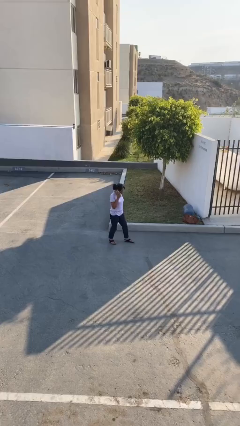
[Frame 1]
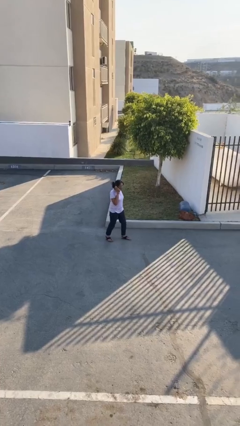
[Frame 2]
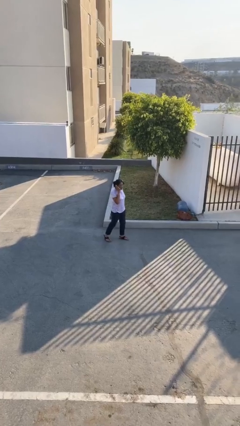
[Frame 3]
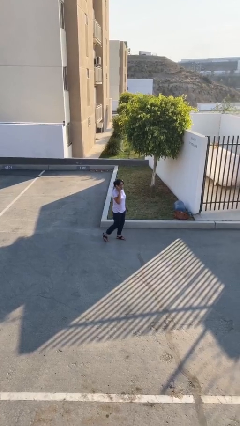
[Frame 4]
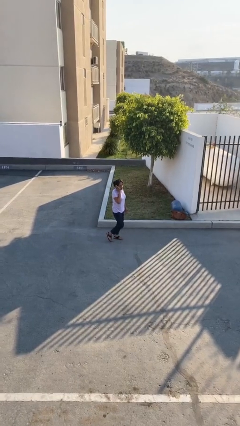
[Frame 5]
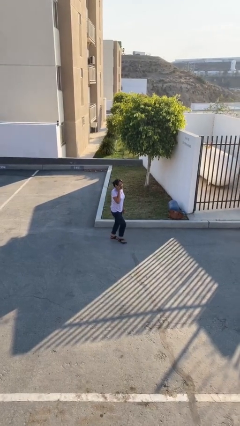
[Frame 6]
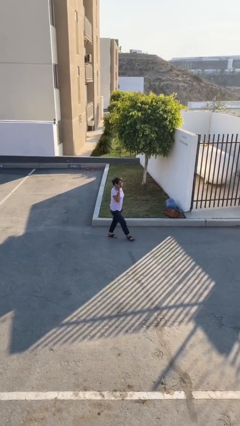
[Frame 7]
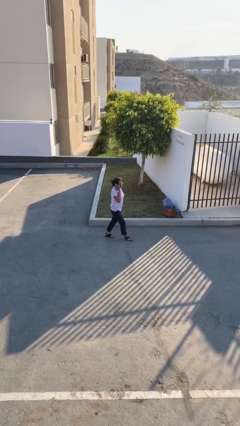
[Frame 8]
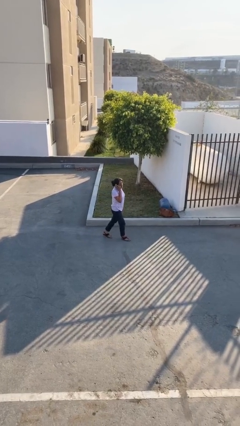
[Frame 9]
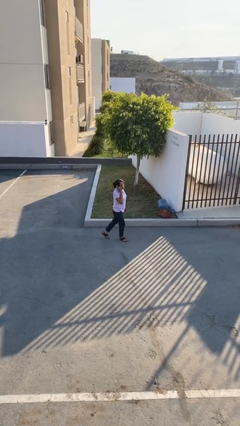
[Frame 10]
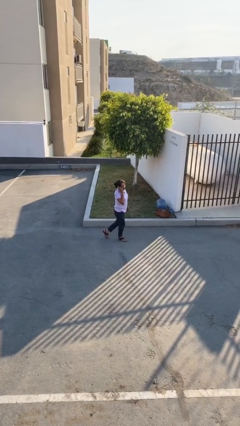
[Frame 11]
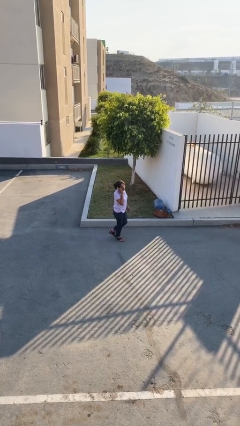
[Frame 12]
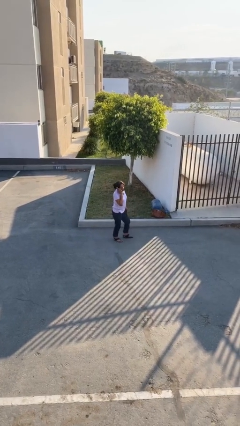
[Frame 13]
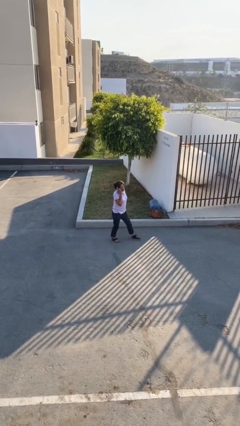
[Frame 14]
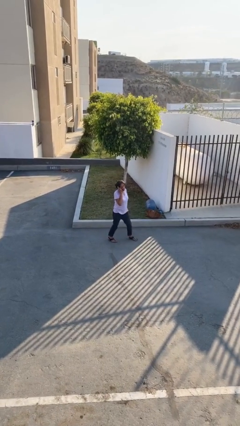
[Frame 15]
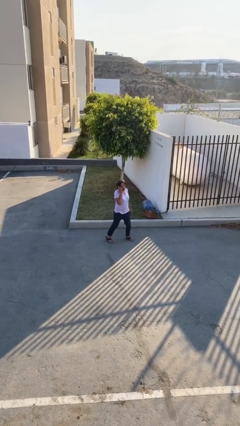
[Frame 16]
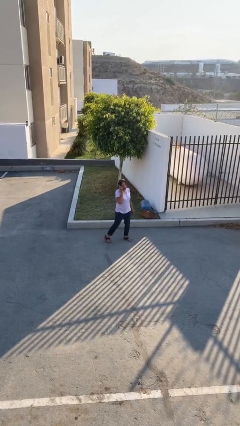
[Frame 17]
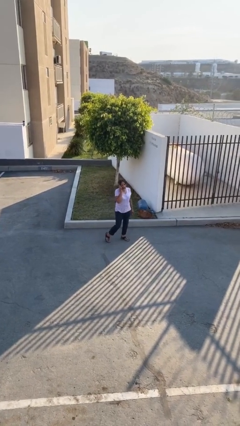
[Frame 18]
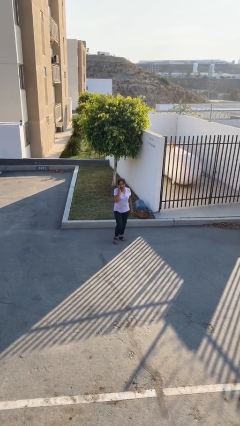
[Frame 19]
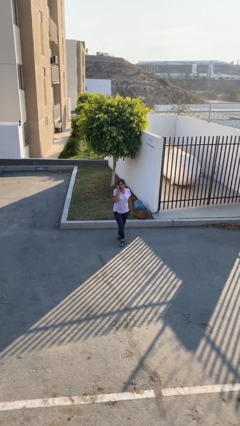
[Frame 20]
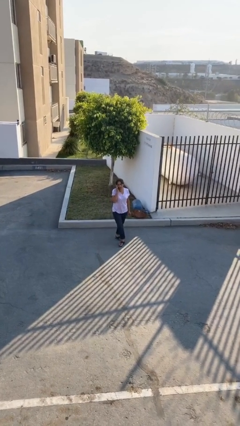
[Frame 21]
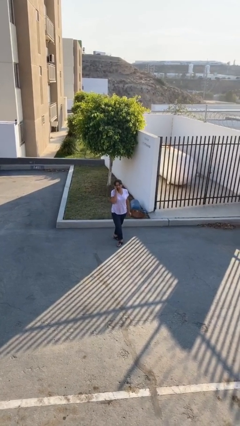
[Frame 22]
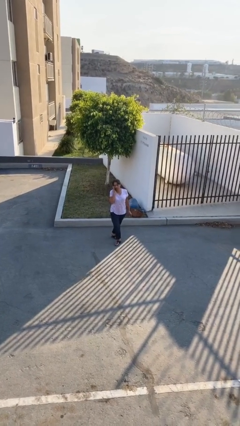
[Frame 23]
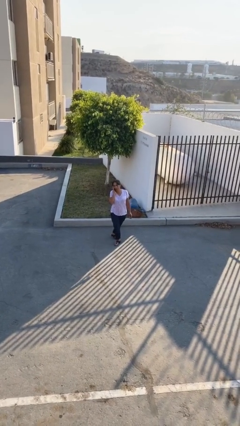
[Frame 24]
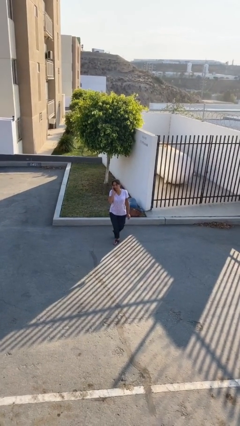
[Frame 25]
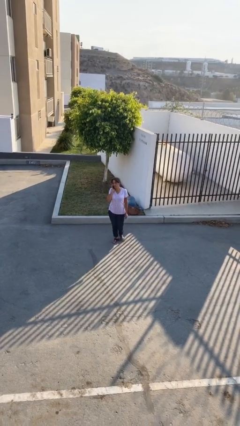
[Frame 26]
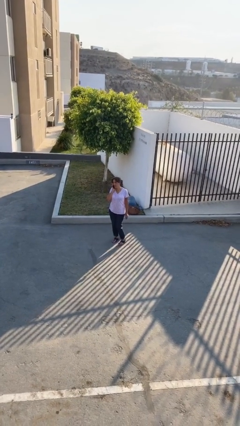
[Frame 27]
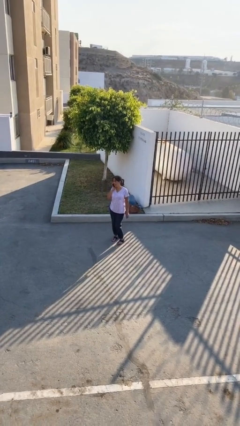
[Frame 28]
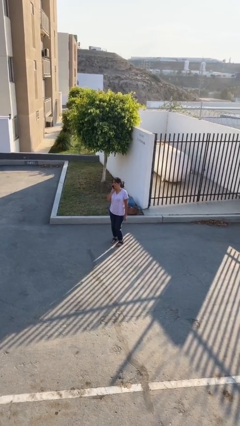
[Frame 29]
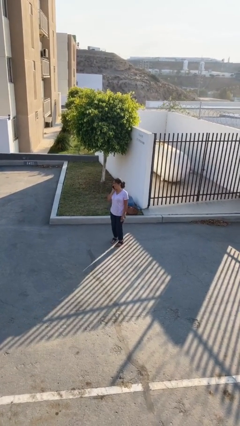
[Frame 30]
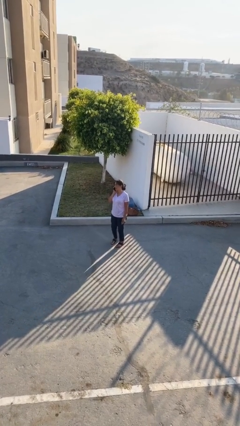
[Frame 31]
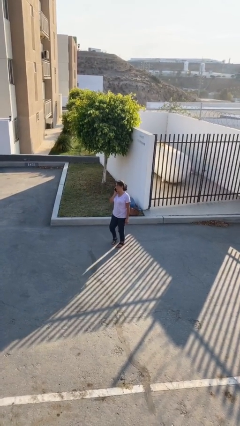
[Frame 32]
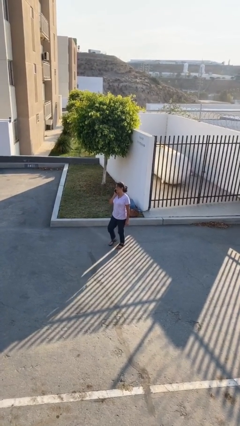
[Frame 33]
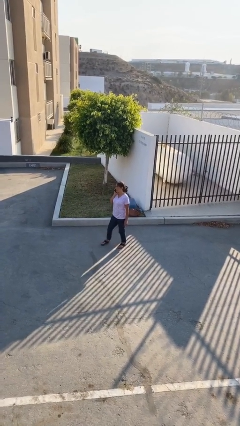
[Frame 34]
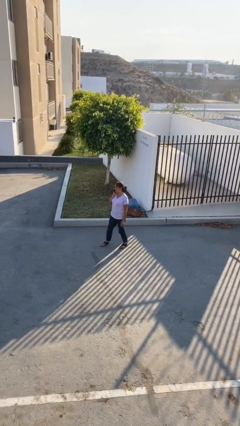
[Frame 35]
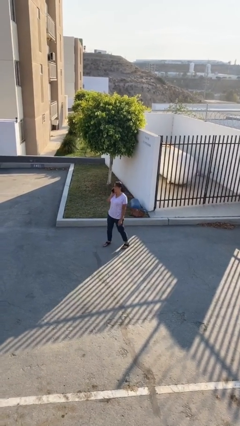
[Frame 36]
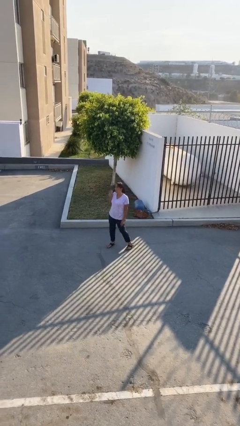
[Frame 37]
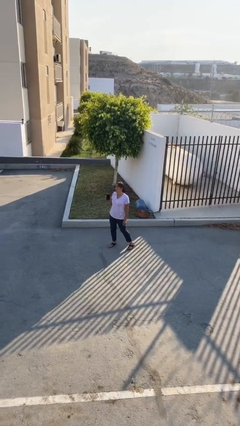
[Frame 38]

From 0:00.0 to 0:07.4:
person talks on phone

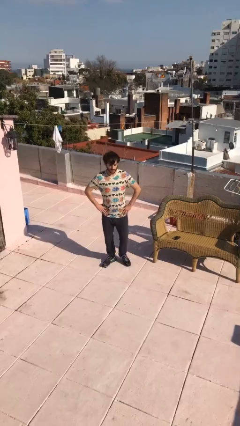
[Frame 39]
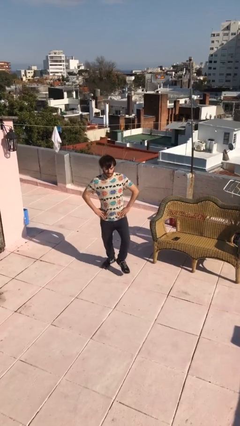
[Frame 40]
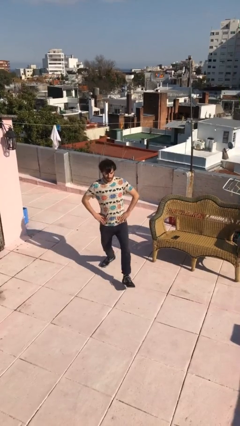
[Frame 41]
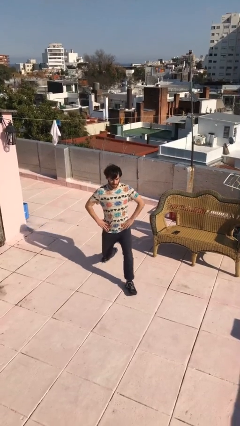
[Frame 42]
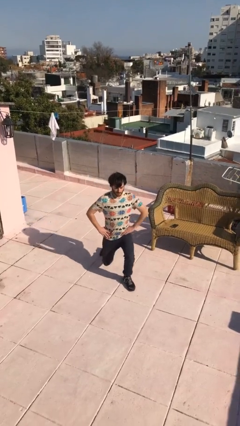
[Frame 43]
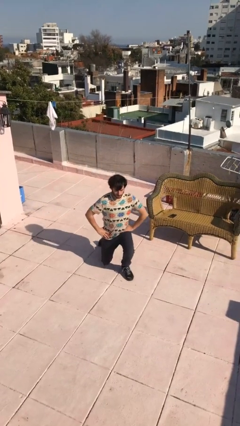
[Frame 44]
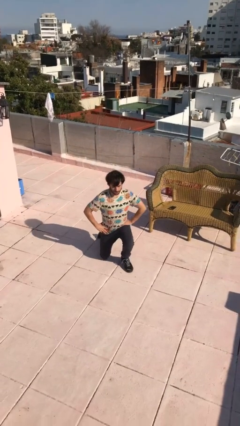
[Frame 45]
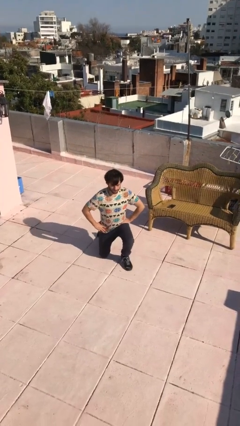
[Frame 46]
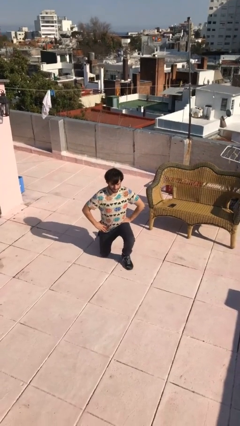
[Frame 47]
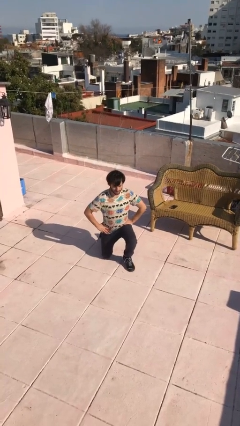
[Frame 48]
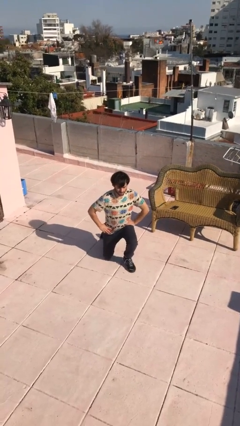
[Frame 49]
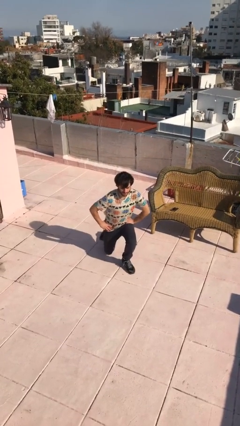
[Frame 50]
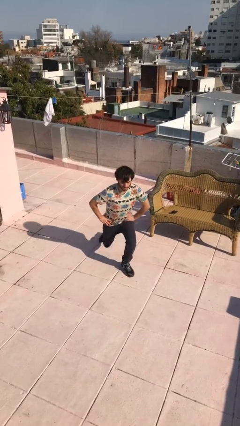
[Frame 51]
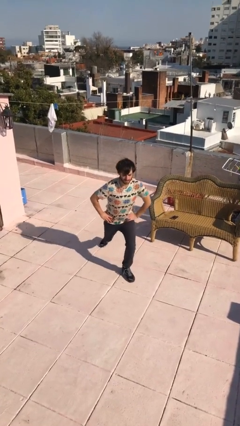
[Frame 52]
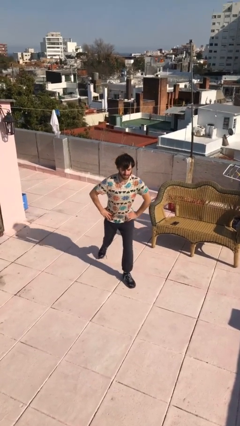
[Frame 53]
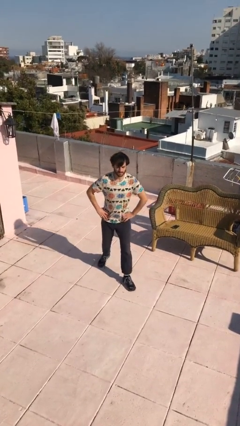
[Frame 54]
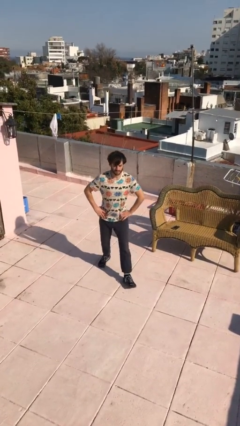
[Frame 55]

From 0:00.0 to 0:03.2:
person exercises with lunges

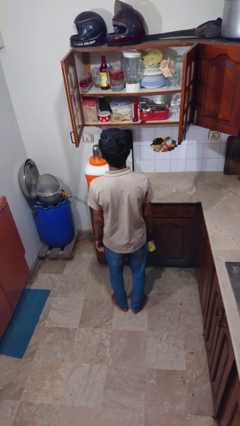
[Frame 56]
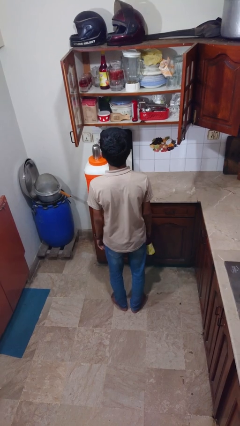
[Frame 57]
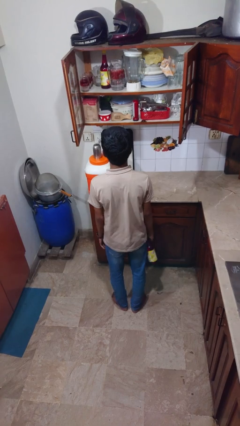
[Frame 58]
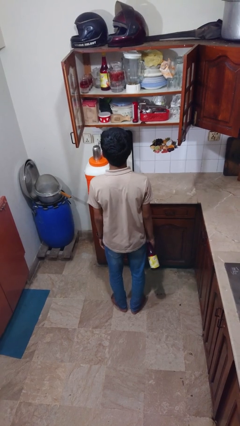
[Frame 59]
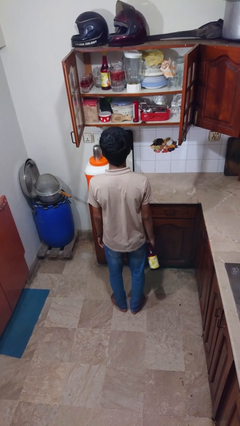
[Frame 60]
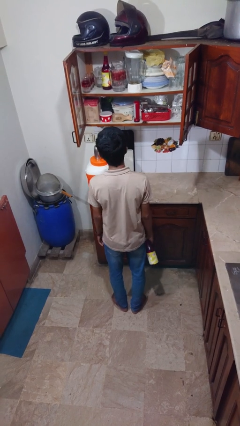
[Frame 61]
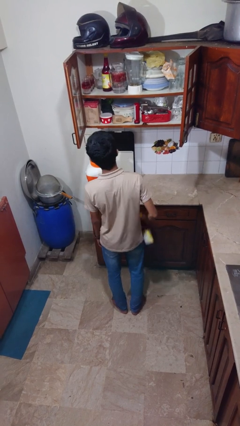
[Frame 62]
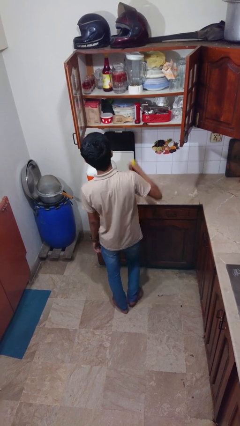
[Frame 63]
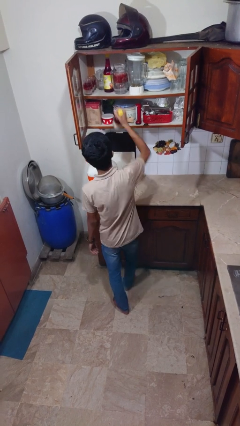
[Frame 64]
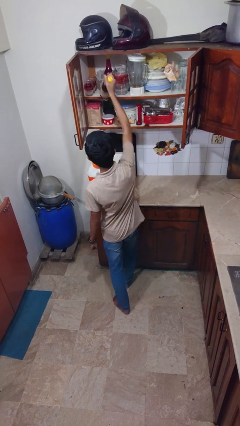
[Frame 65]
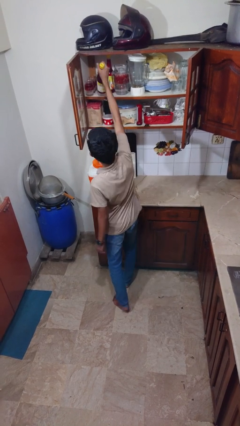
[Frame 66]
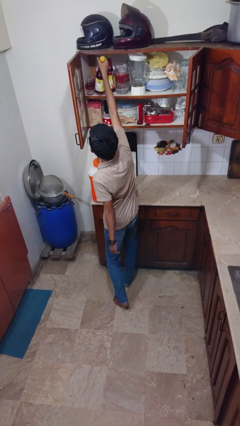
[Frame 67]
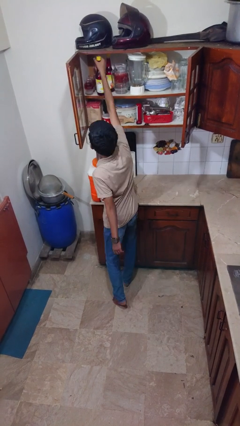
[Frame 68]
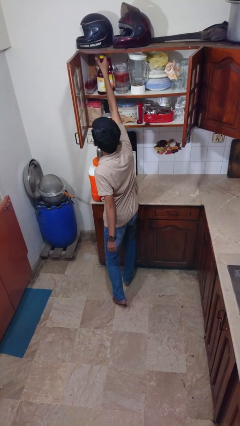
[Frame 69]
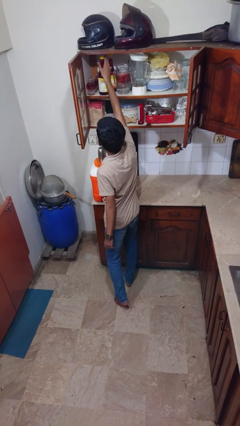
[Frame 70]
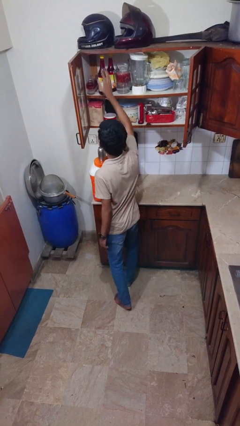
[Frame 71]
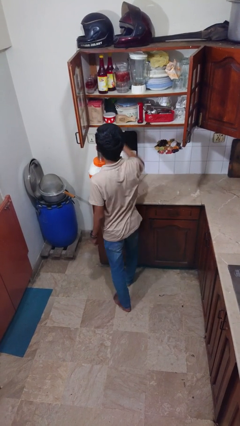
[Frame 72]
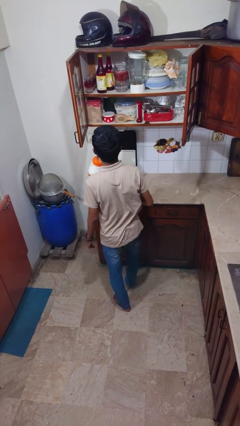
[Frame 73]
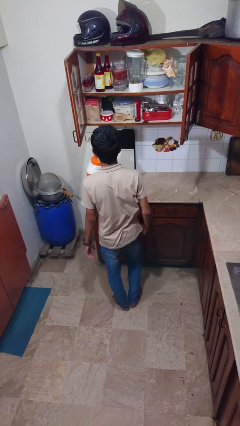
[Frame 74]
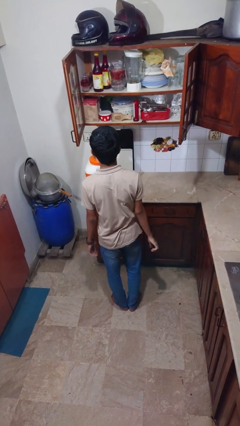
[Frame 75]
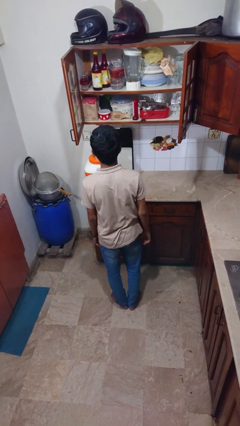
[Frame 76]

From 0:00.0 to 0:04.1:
person puts down object into cabinet

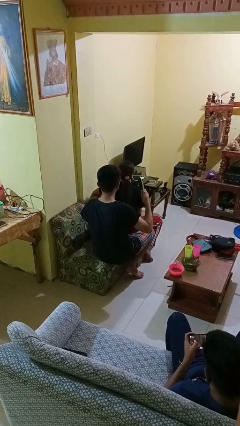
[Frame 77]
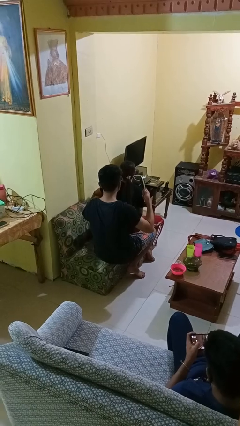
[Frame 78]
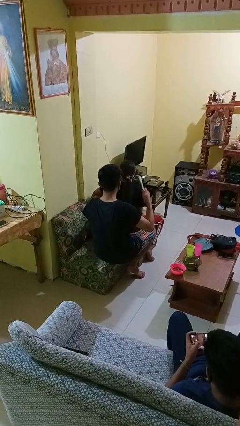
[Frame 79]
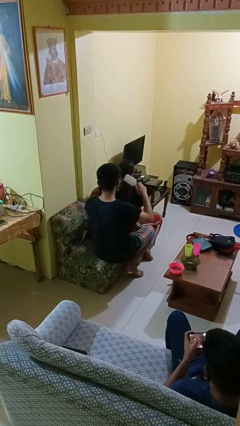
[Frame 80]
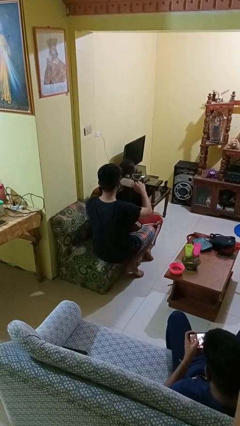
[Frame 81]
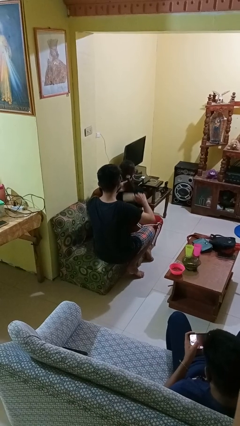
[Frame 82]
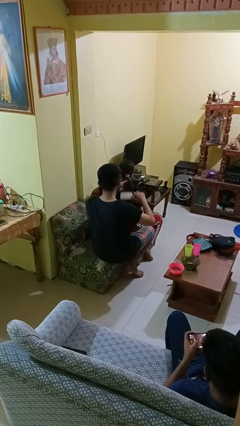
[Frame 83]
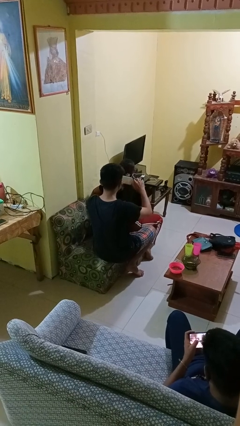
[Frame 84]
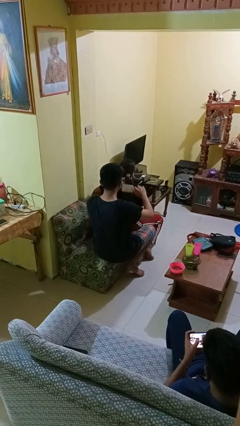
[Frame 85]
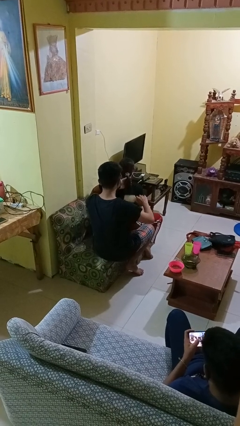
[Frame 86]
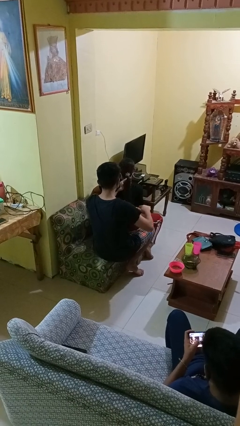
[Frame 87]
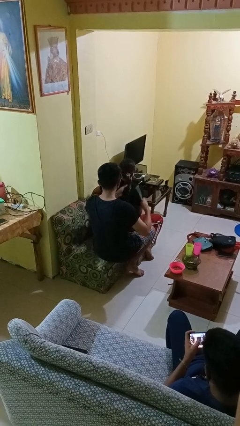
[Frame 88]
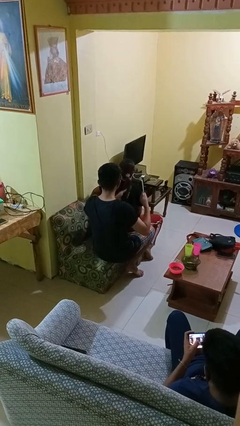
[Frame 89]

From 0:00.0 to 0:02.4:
person brushes hair of person

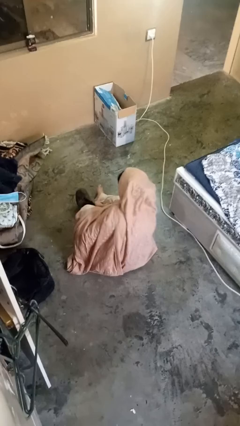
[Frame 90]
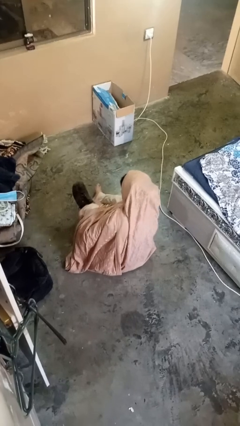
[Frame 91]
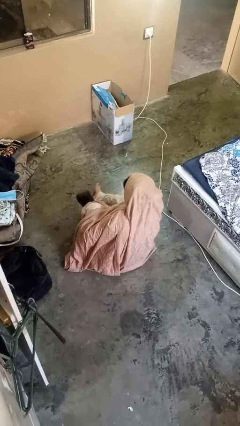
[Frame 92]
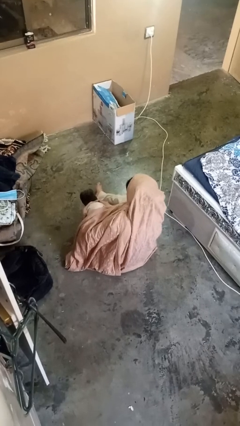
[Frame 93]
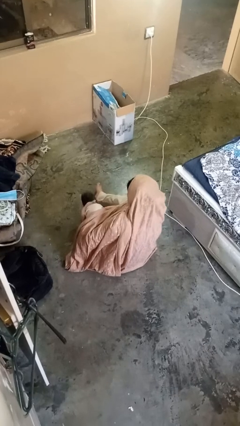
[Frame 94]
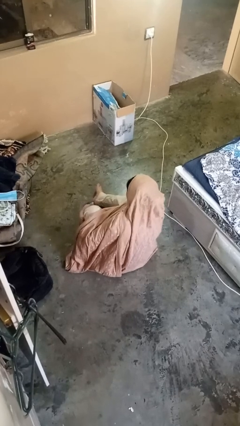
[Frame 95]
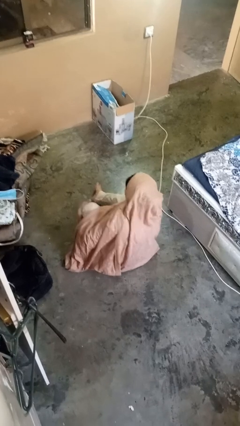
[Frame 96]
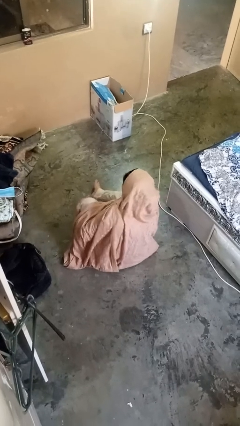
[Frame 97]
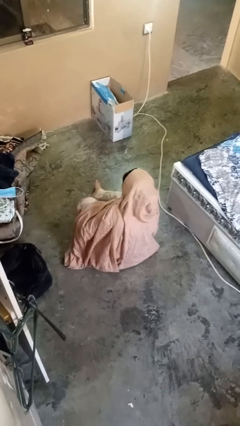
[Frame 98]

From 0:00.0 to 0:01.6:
person puts on shoes
